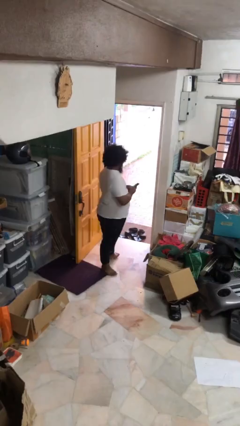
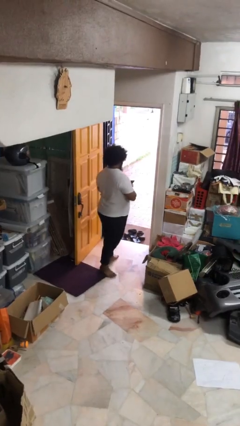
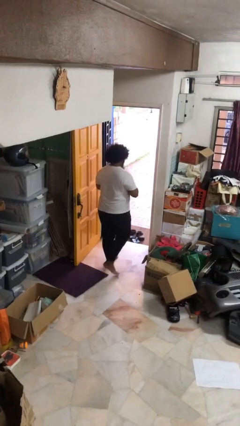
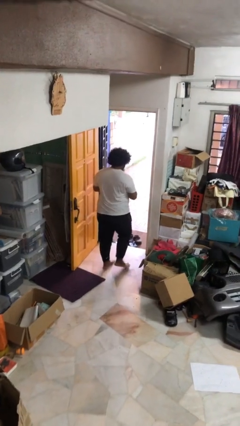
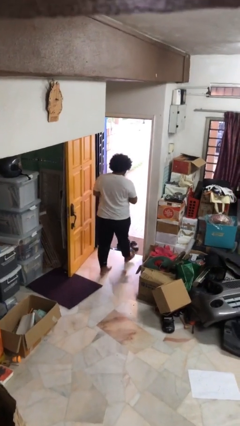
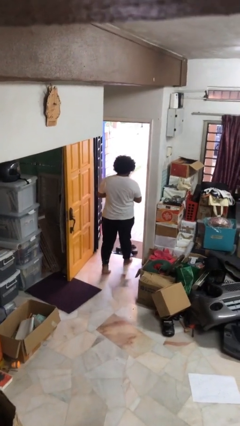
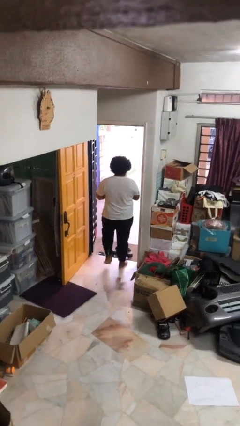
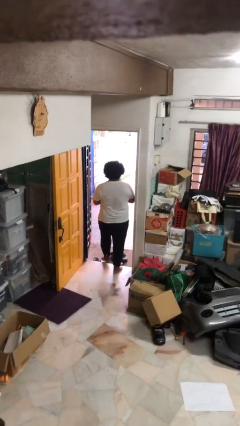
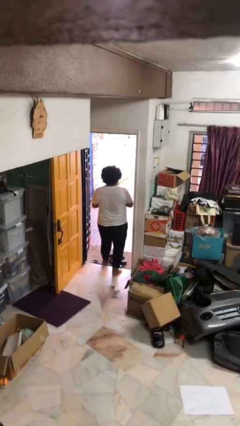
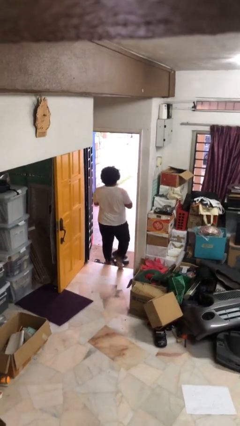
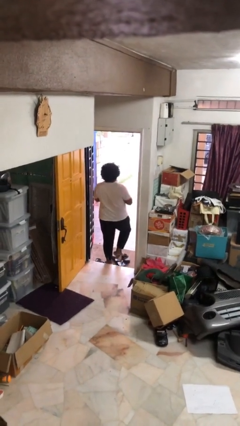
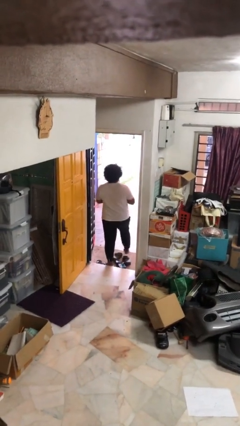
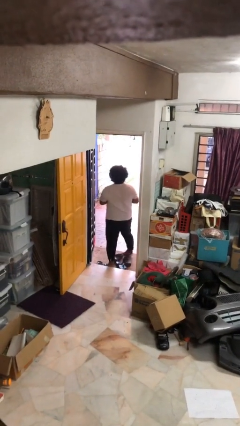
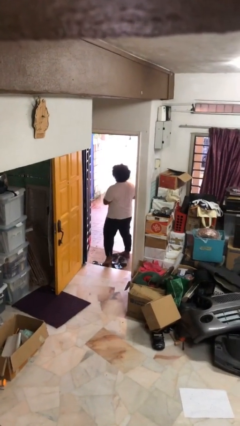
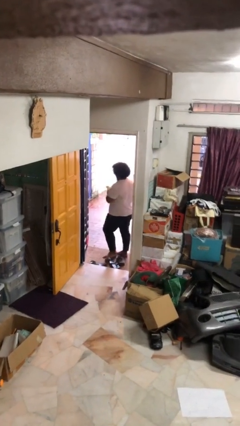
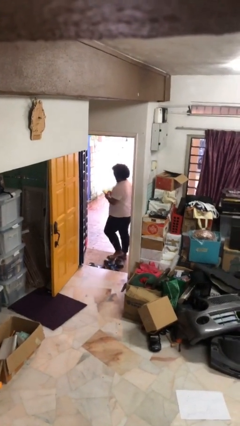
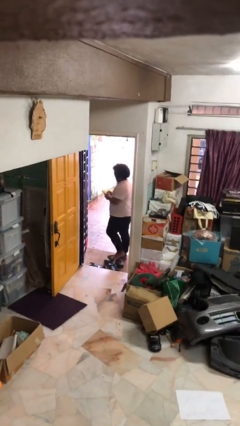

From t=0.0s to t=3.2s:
person exits scene through structure

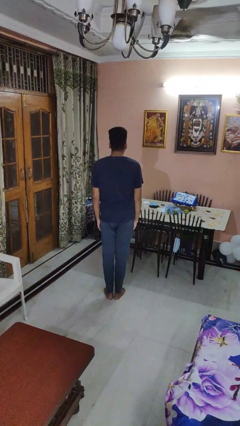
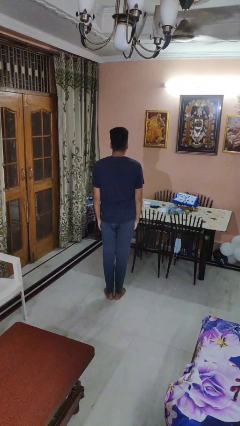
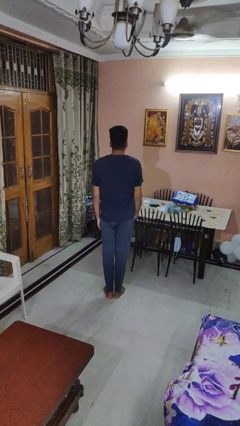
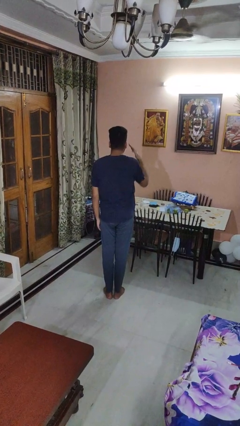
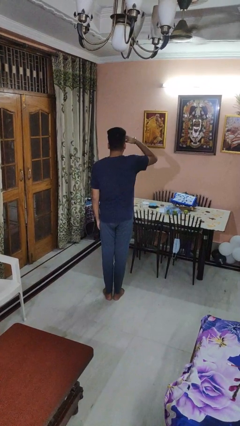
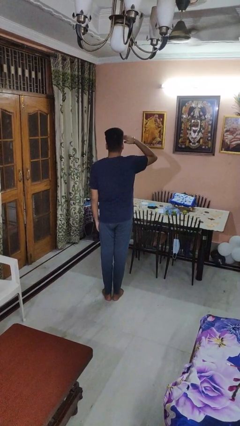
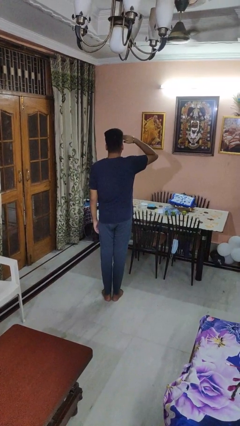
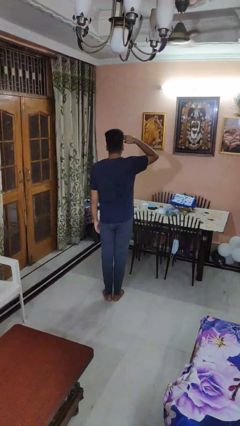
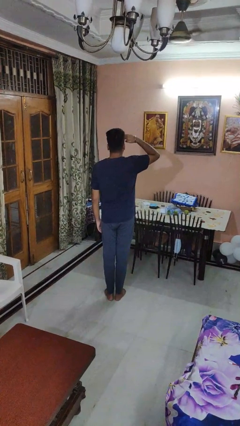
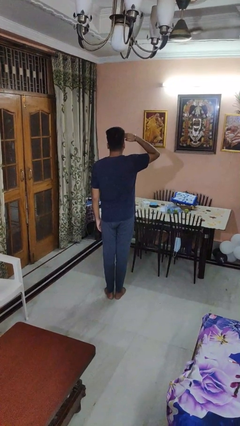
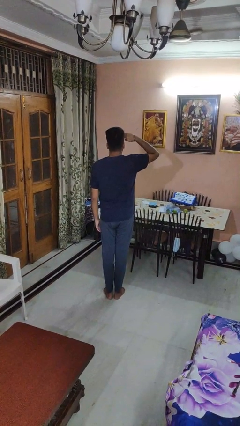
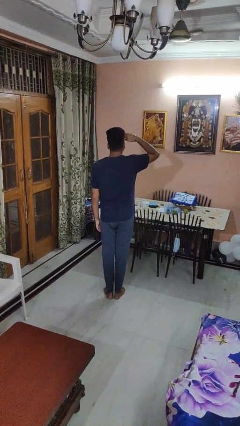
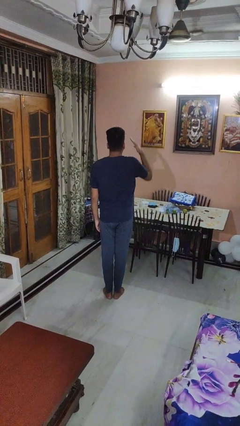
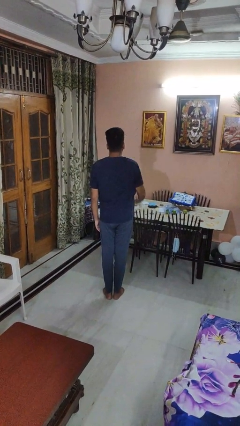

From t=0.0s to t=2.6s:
person salutes

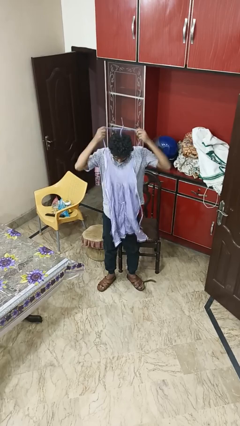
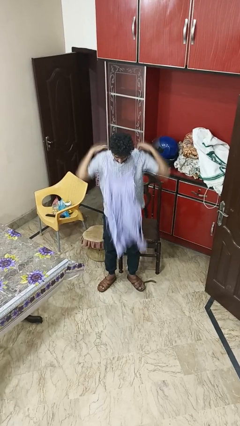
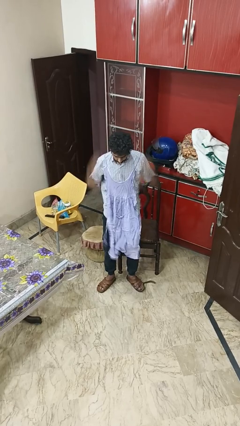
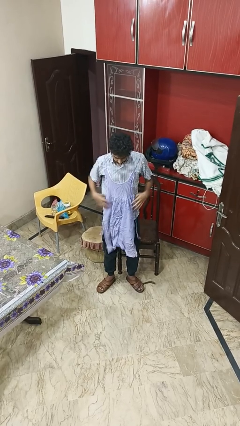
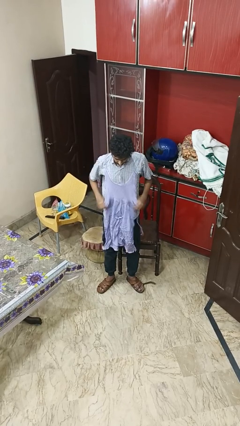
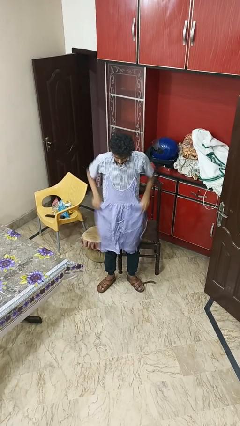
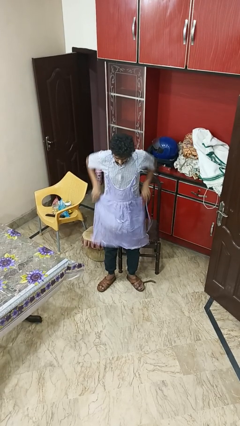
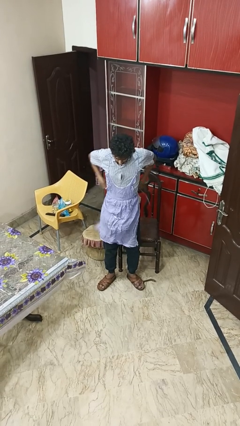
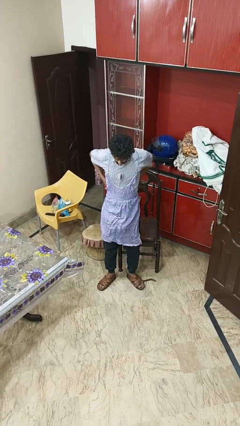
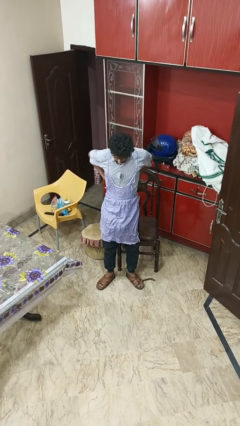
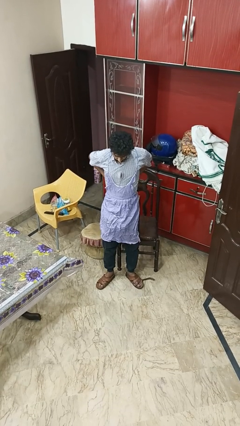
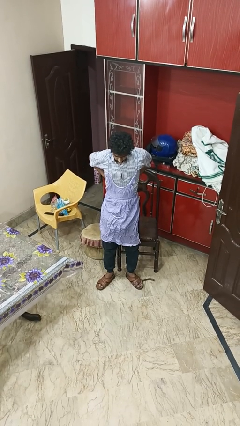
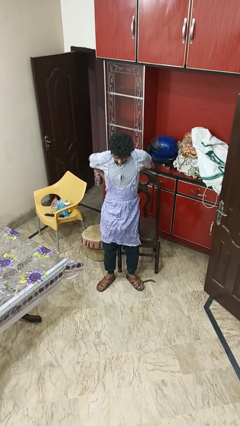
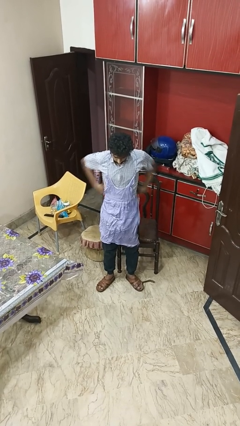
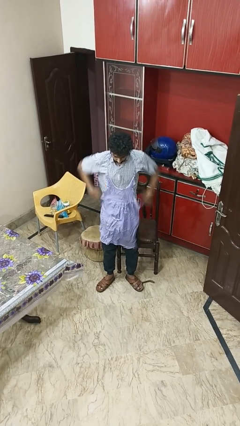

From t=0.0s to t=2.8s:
person puts on apron

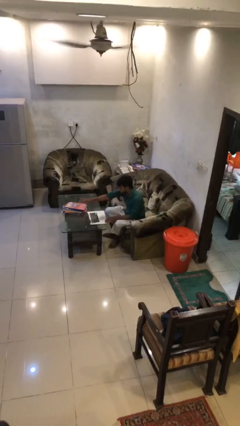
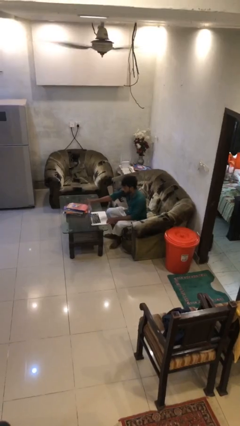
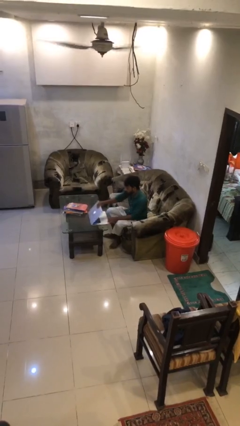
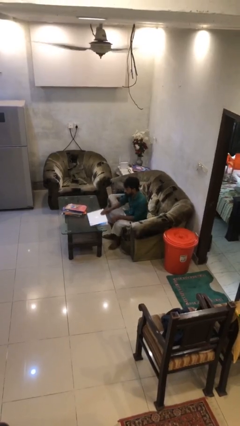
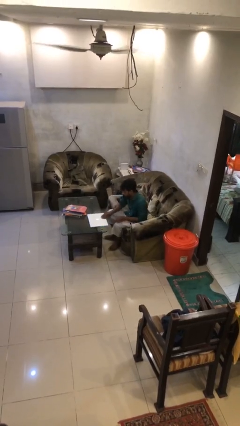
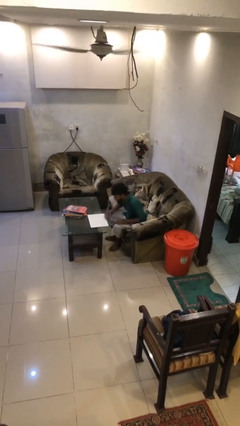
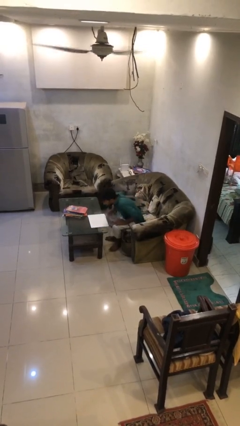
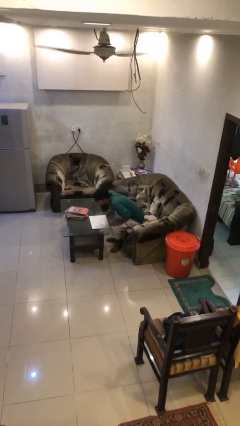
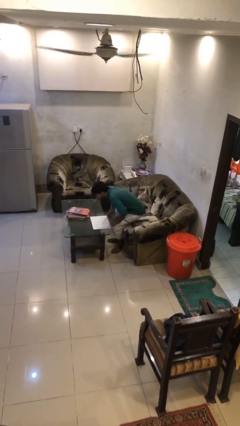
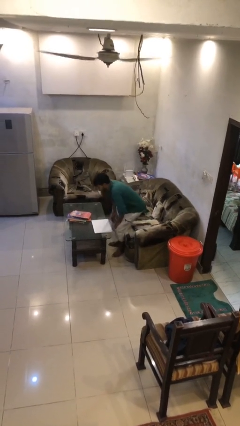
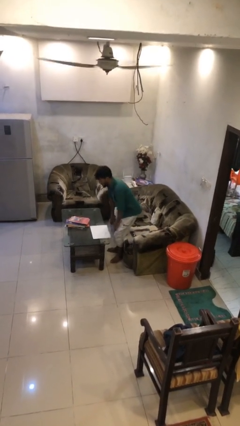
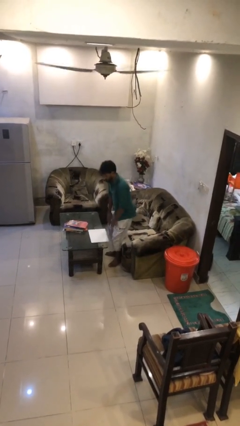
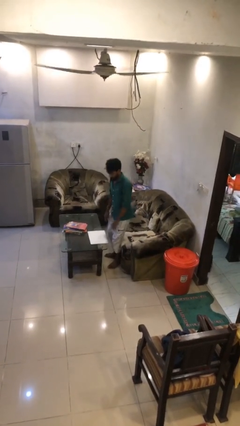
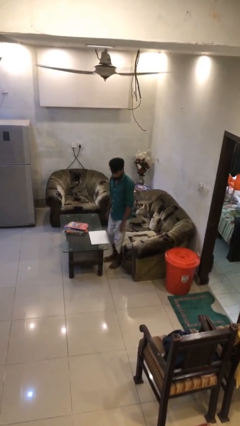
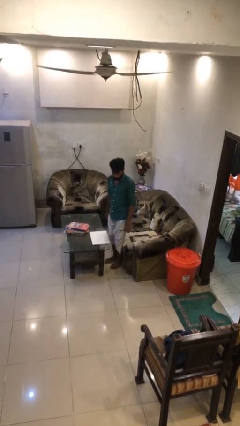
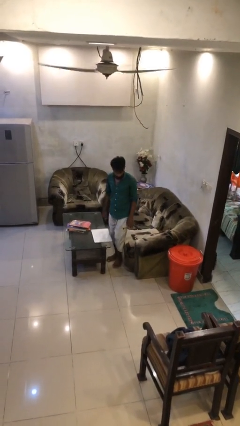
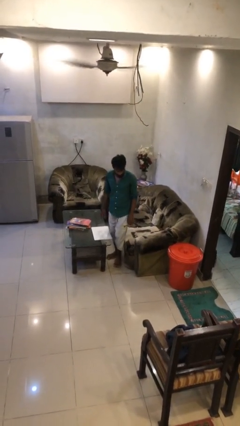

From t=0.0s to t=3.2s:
person stands up

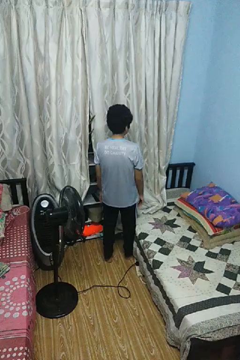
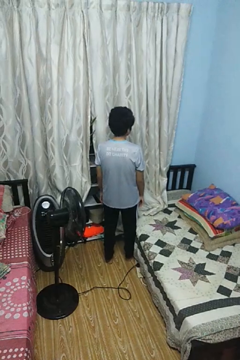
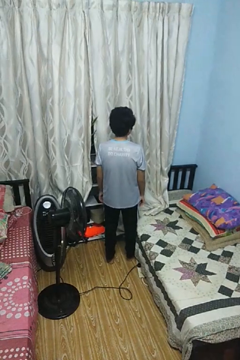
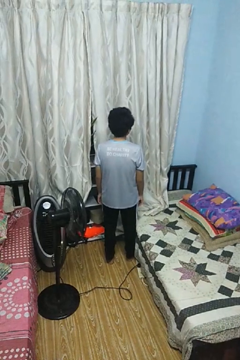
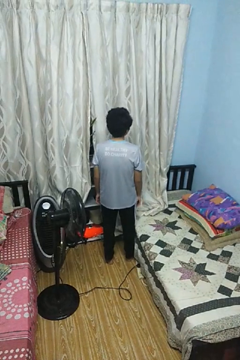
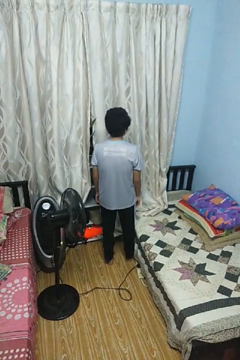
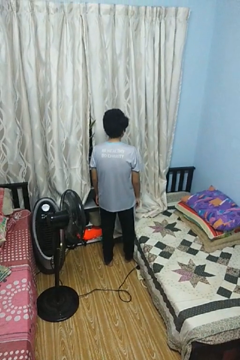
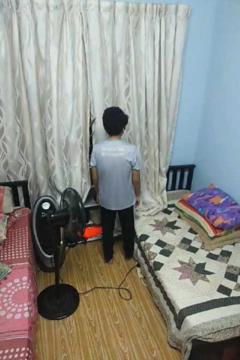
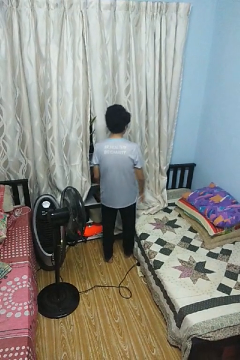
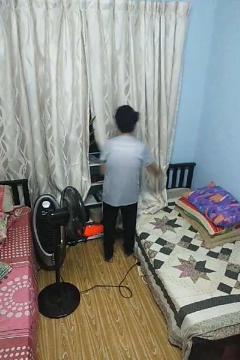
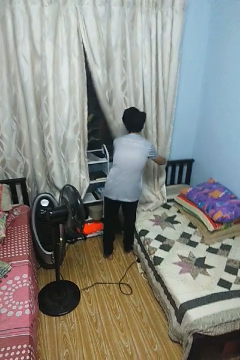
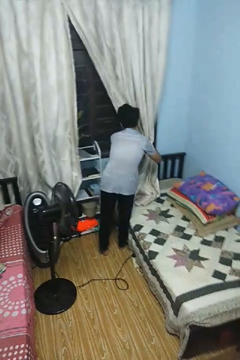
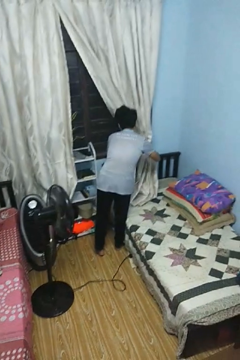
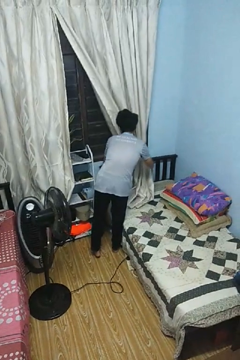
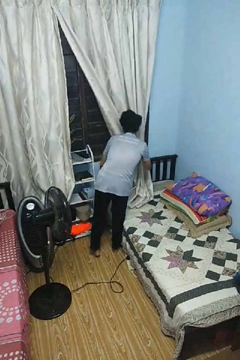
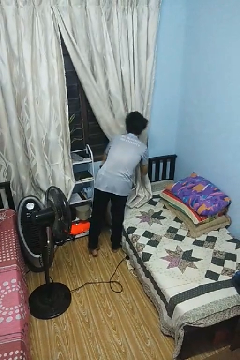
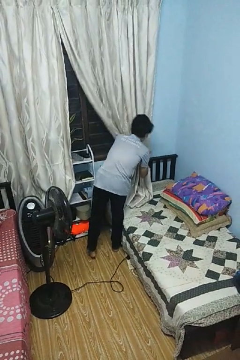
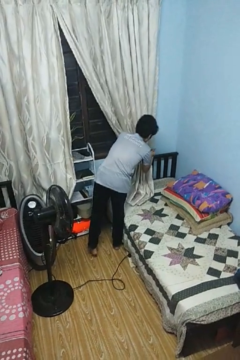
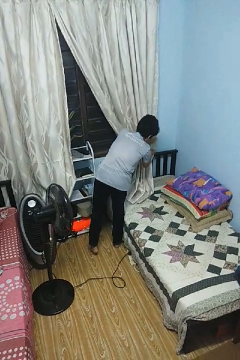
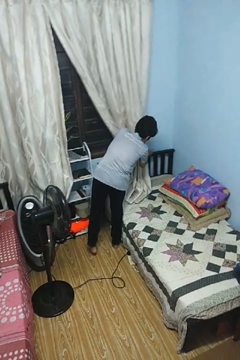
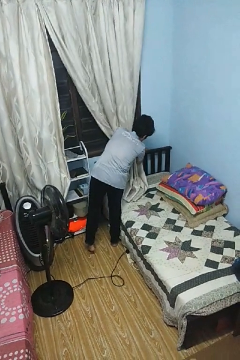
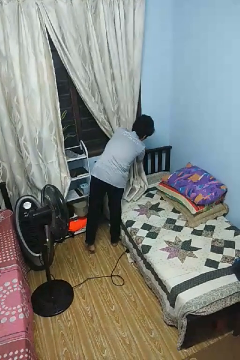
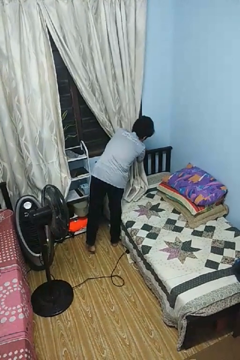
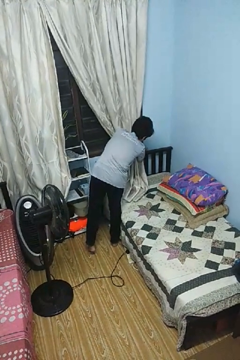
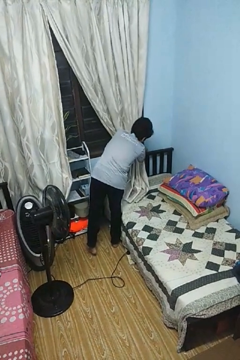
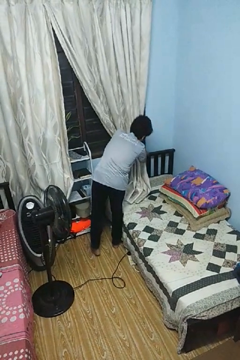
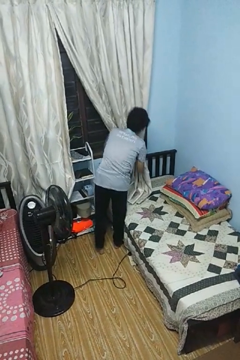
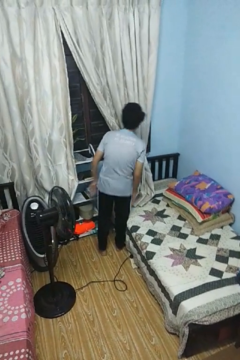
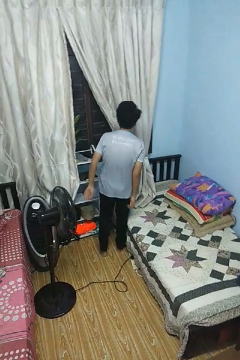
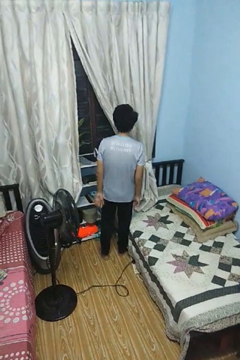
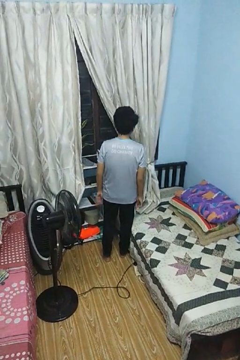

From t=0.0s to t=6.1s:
person opens curtains

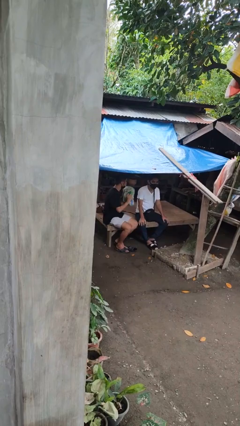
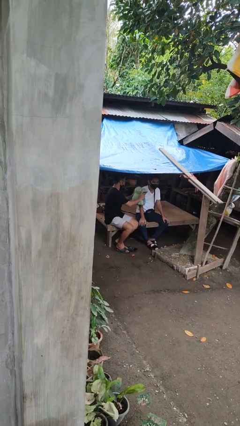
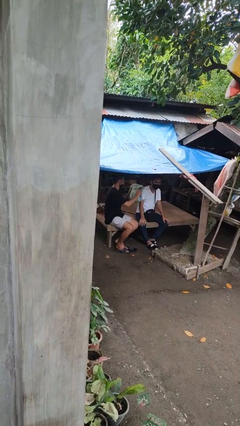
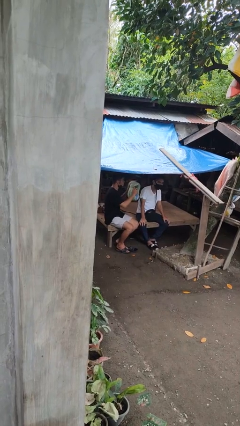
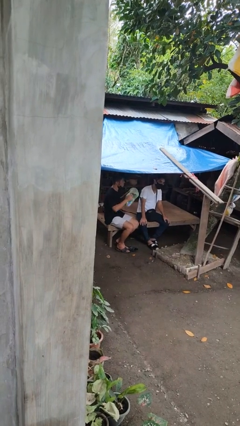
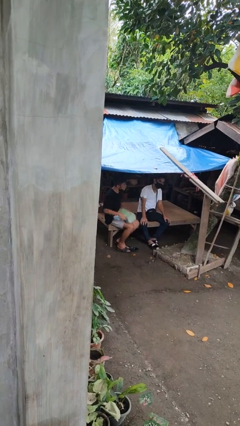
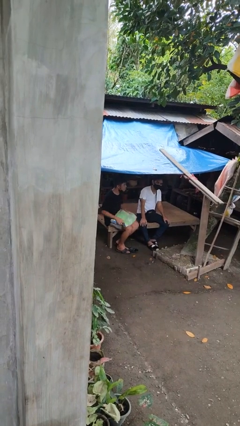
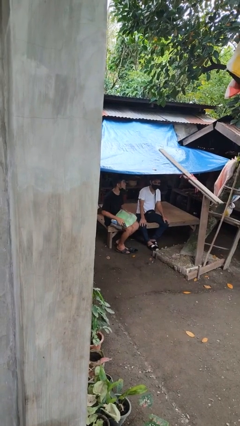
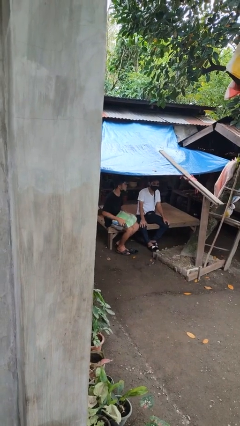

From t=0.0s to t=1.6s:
person hits person with pillow
